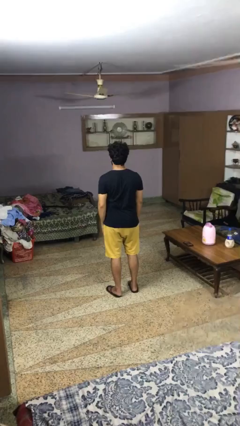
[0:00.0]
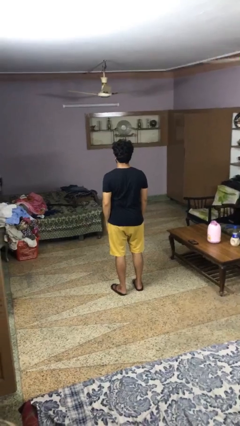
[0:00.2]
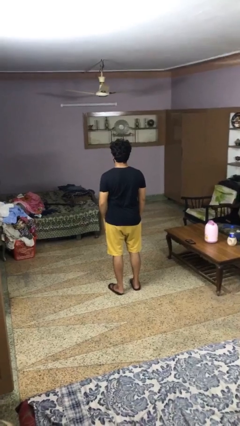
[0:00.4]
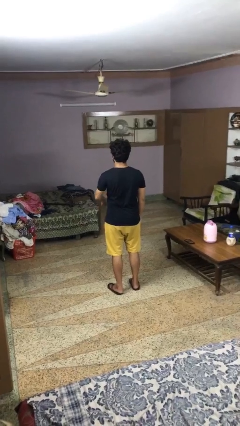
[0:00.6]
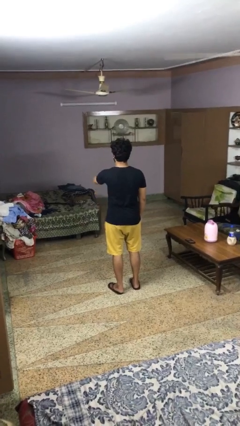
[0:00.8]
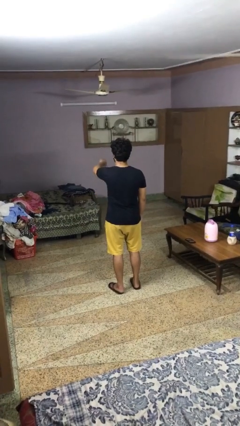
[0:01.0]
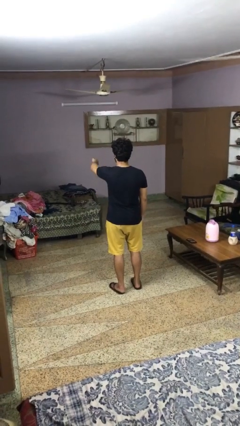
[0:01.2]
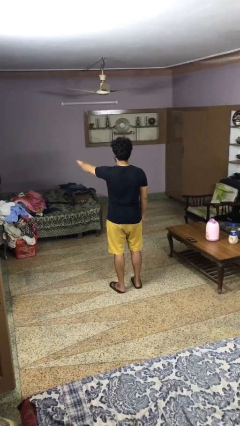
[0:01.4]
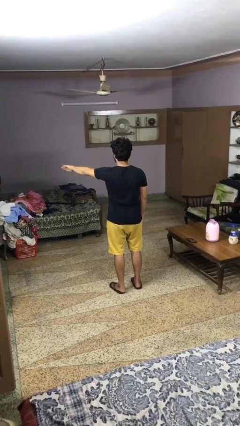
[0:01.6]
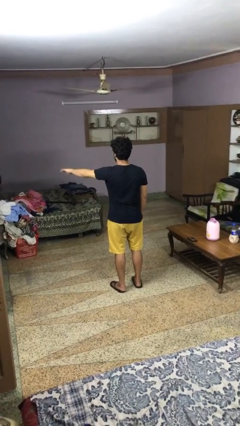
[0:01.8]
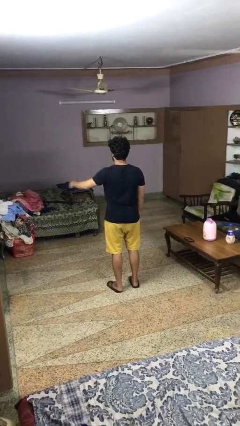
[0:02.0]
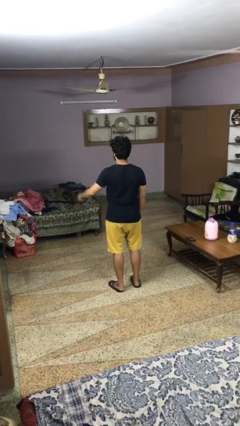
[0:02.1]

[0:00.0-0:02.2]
person gestures swipe left

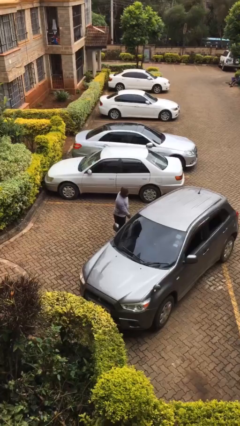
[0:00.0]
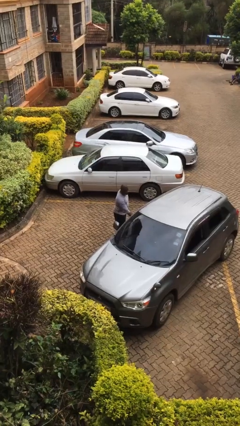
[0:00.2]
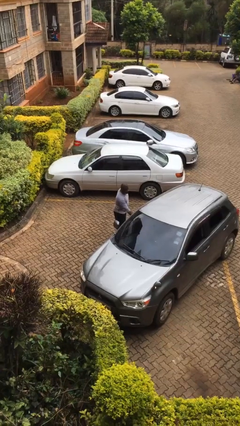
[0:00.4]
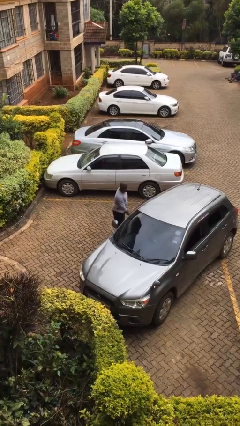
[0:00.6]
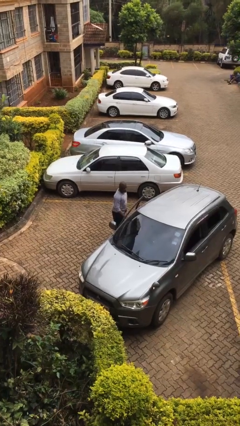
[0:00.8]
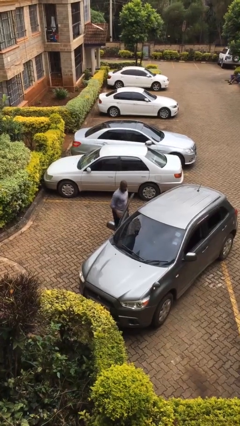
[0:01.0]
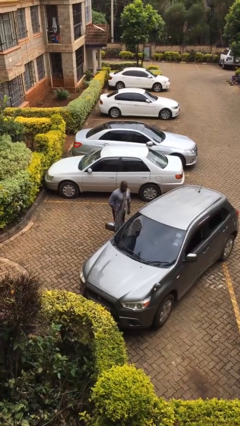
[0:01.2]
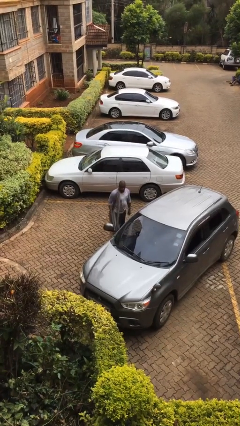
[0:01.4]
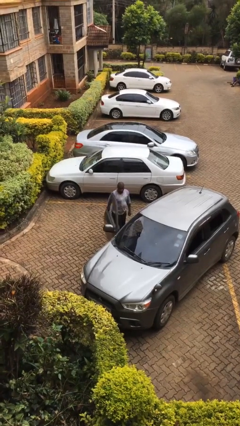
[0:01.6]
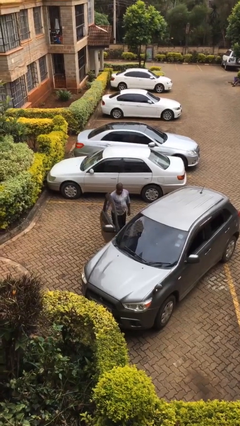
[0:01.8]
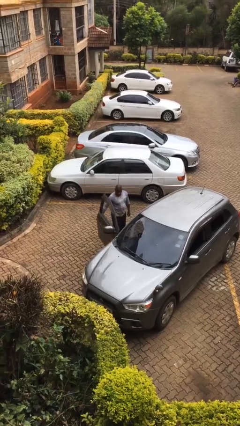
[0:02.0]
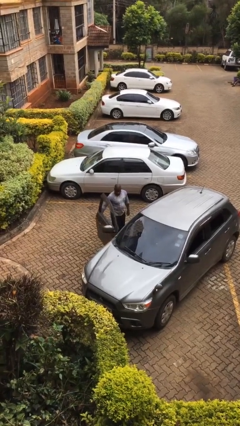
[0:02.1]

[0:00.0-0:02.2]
person opens car door

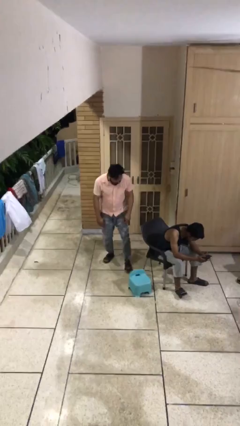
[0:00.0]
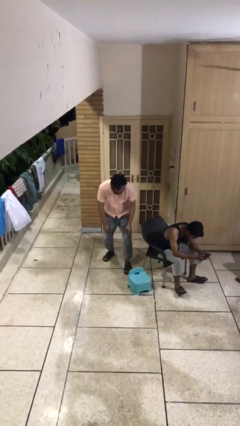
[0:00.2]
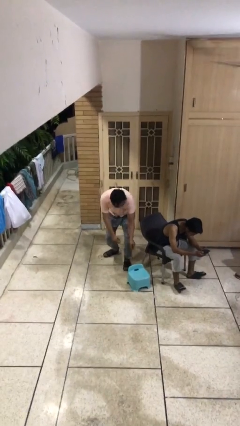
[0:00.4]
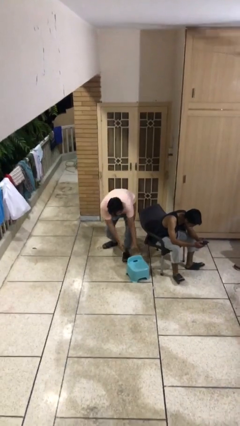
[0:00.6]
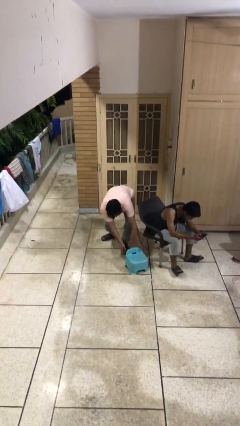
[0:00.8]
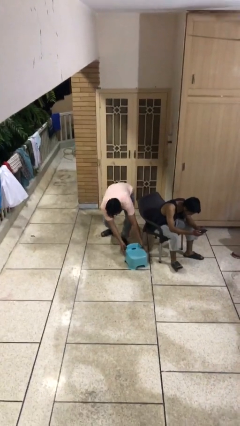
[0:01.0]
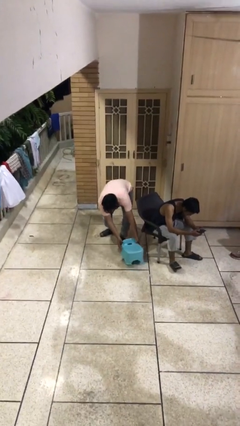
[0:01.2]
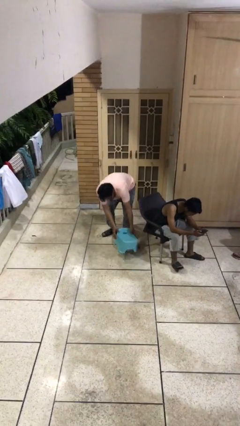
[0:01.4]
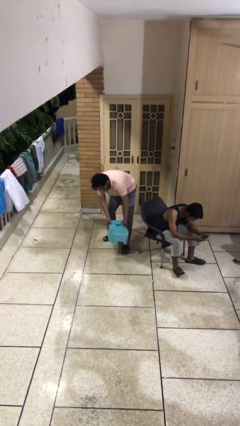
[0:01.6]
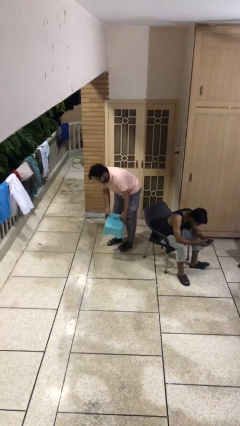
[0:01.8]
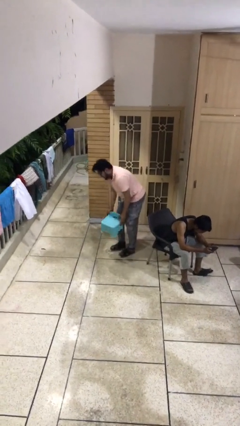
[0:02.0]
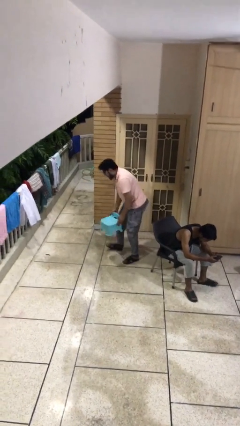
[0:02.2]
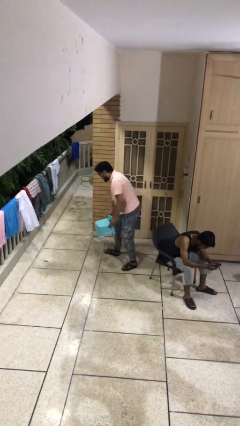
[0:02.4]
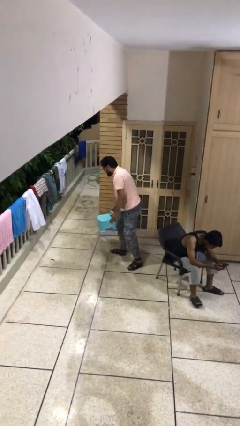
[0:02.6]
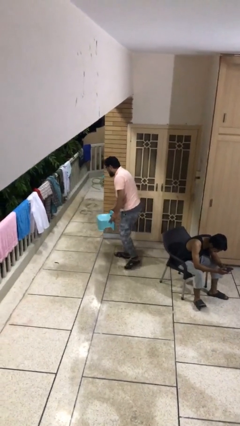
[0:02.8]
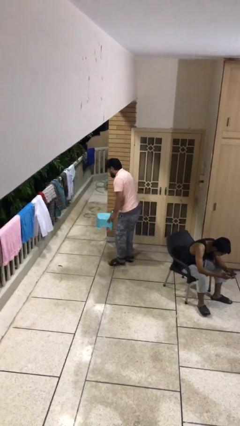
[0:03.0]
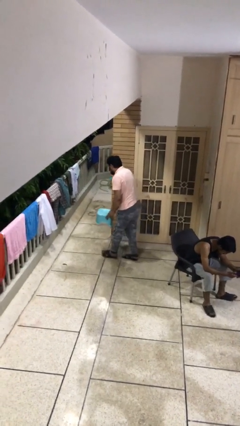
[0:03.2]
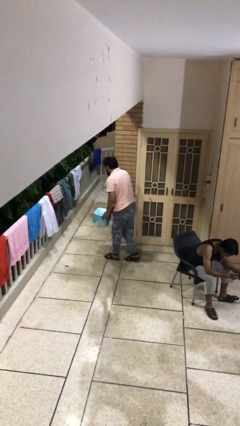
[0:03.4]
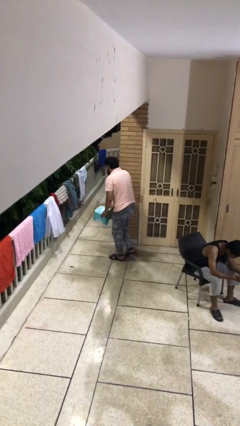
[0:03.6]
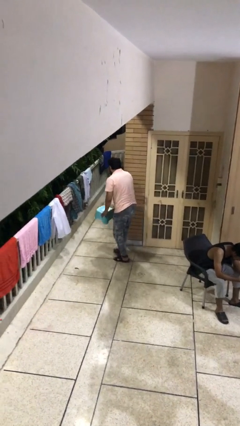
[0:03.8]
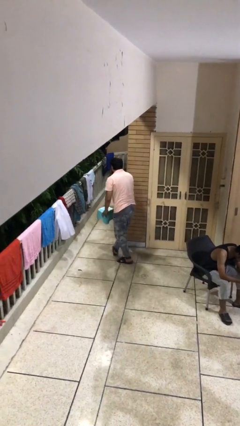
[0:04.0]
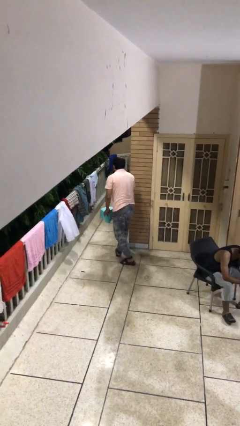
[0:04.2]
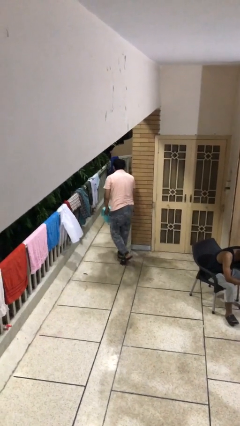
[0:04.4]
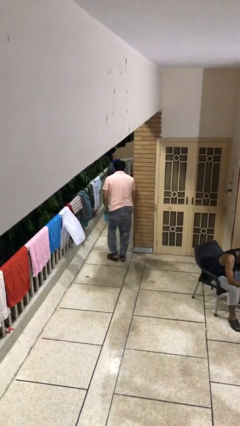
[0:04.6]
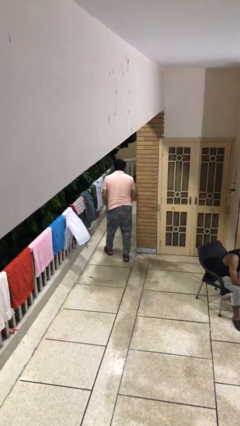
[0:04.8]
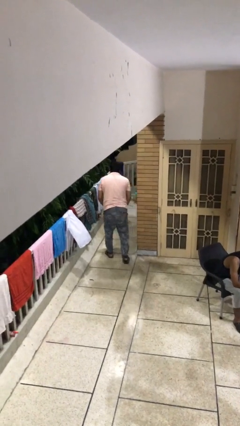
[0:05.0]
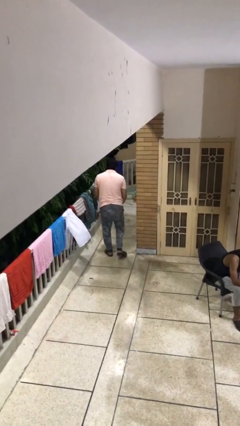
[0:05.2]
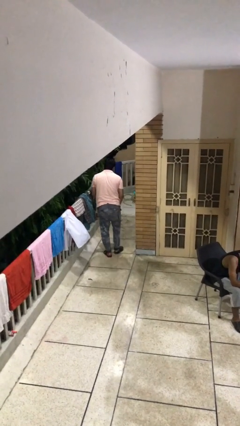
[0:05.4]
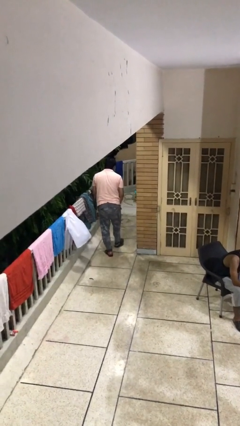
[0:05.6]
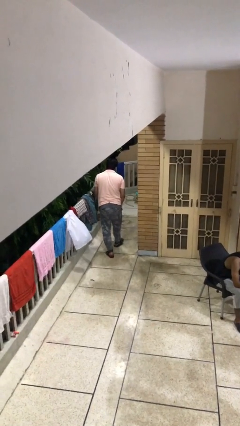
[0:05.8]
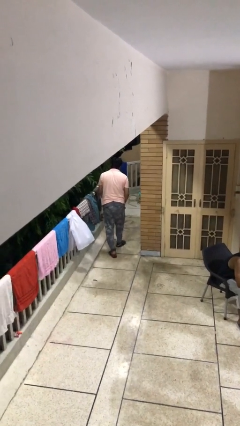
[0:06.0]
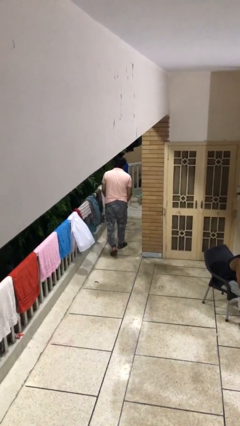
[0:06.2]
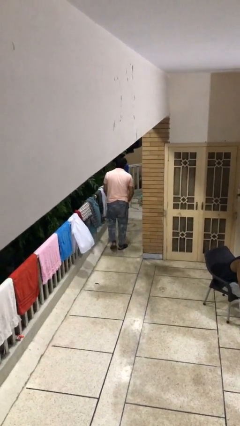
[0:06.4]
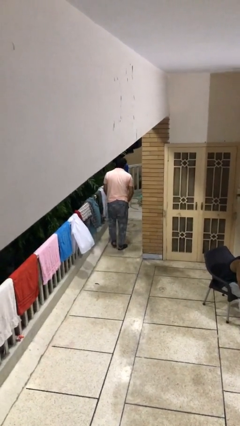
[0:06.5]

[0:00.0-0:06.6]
person steals object from person

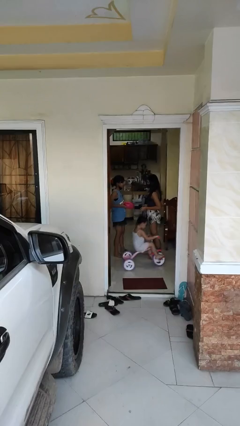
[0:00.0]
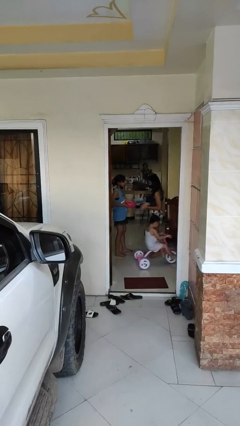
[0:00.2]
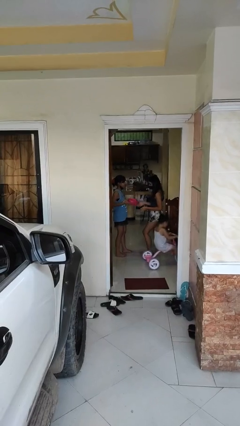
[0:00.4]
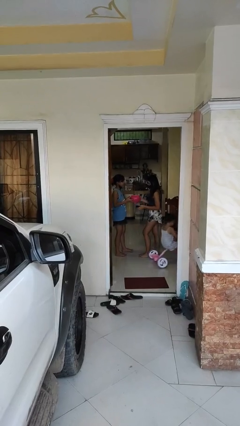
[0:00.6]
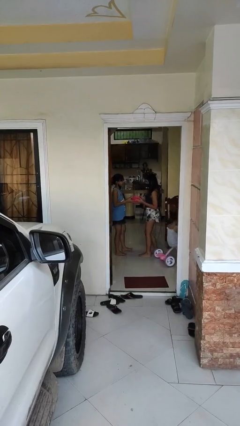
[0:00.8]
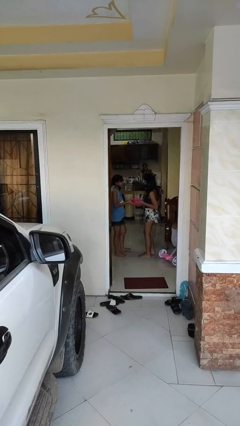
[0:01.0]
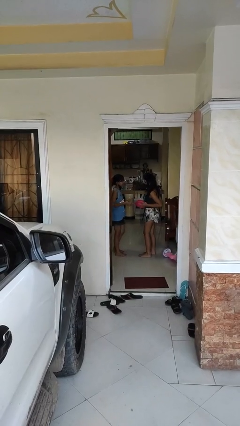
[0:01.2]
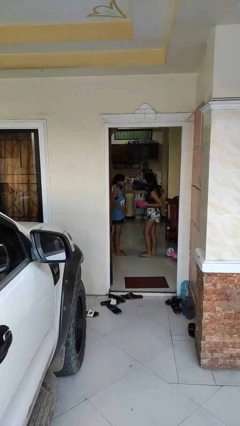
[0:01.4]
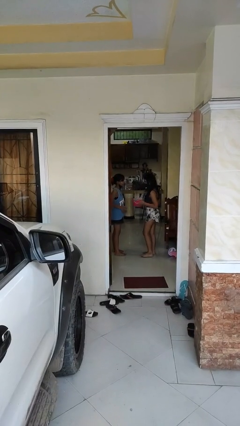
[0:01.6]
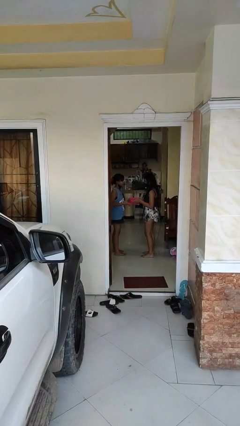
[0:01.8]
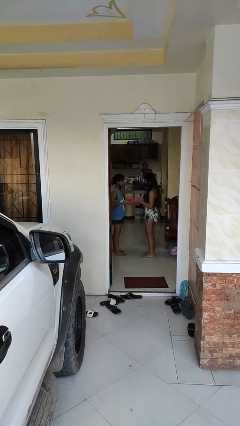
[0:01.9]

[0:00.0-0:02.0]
person transfers object to person

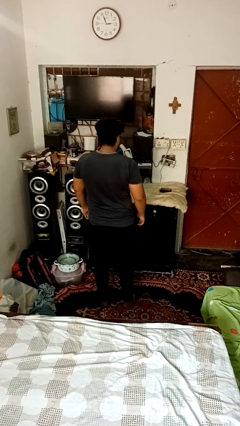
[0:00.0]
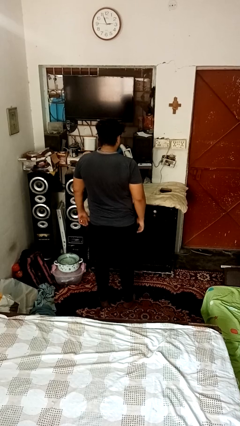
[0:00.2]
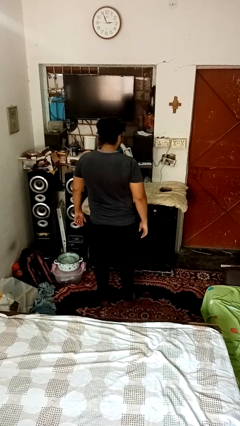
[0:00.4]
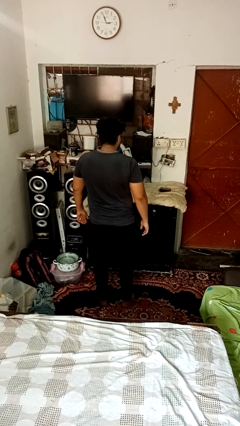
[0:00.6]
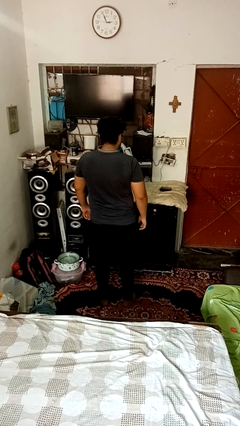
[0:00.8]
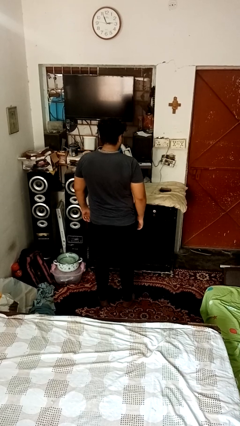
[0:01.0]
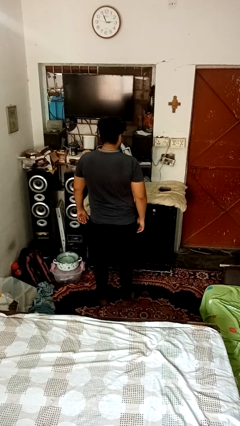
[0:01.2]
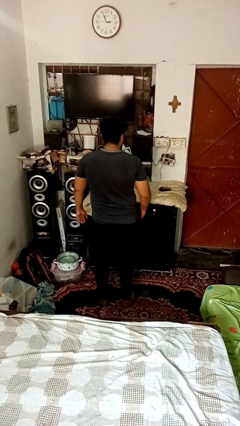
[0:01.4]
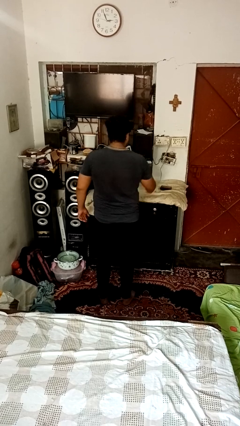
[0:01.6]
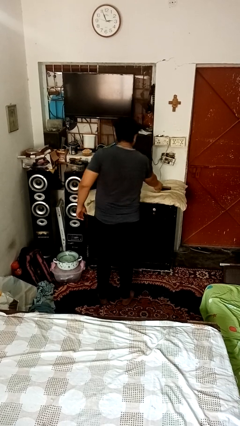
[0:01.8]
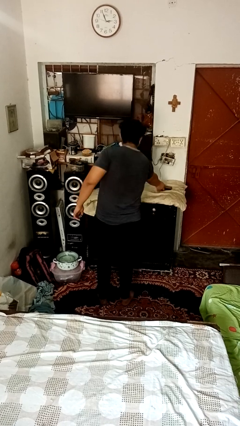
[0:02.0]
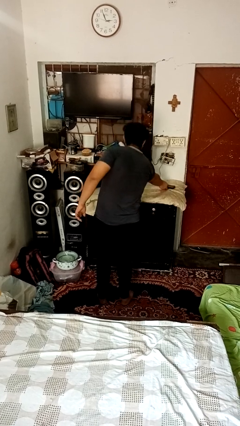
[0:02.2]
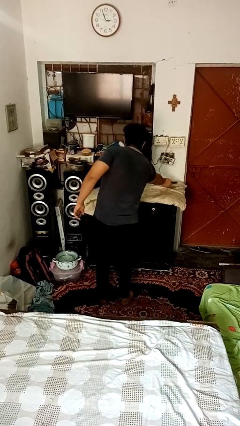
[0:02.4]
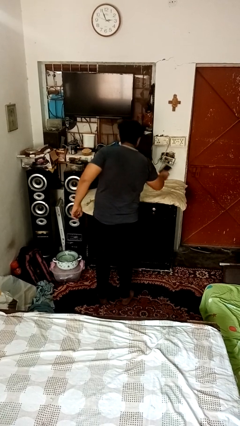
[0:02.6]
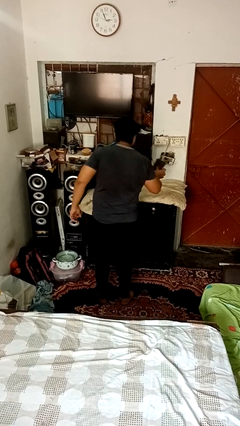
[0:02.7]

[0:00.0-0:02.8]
person picks up object from table

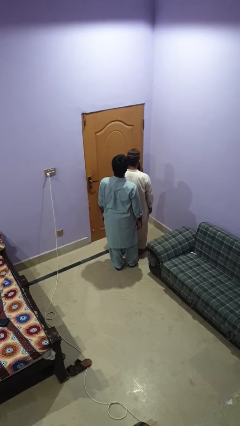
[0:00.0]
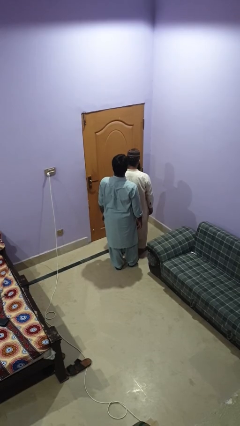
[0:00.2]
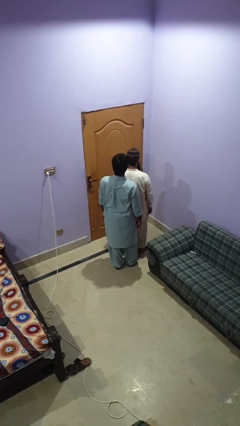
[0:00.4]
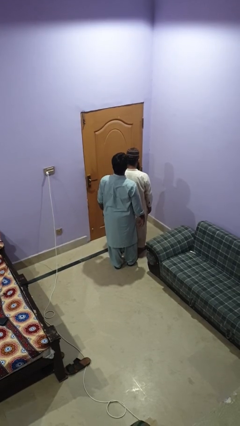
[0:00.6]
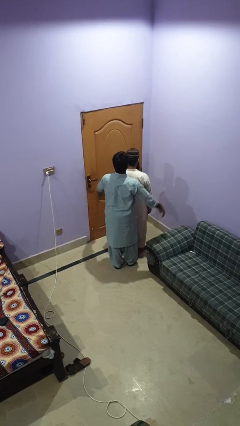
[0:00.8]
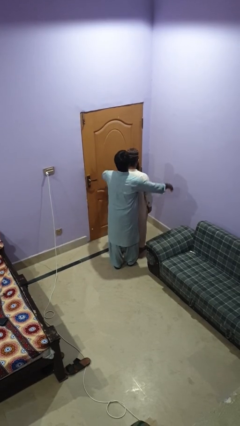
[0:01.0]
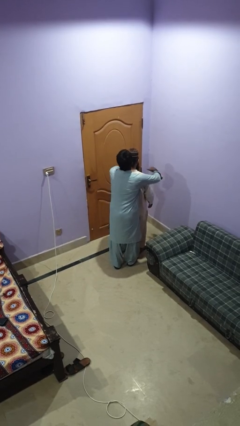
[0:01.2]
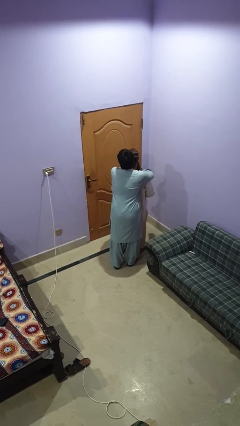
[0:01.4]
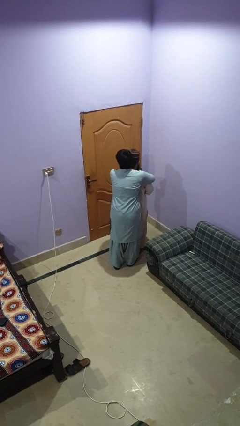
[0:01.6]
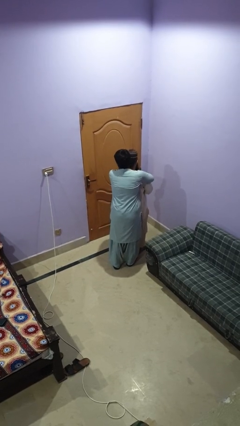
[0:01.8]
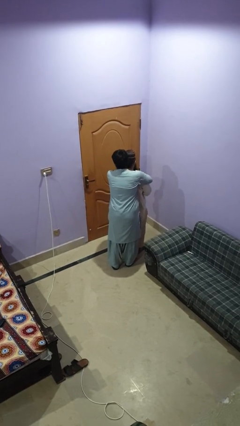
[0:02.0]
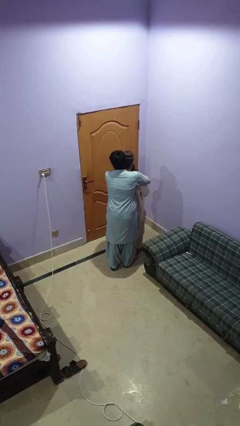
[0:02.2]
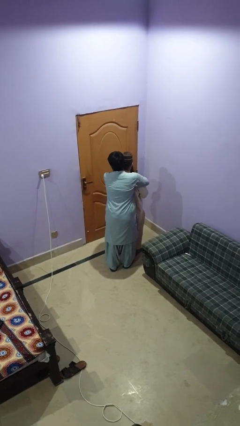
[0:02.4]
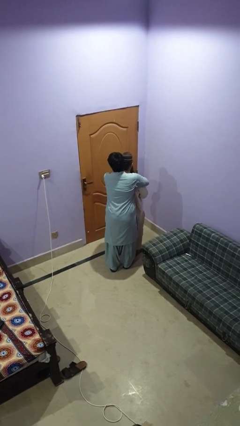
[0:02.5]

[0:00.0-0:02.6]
person hugs person from behind
